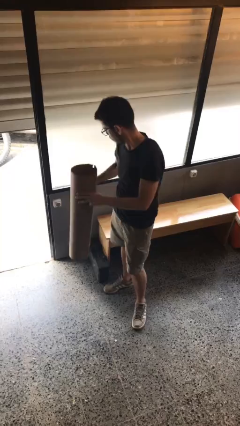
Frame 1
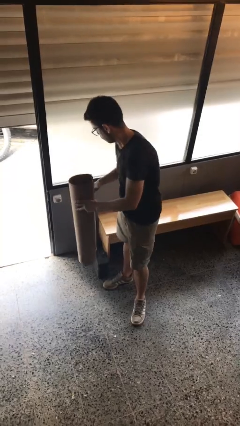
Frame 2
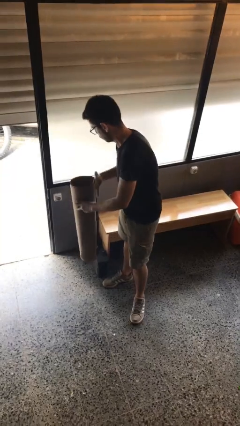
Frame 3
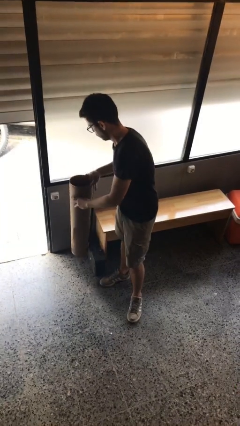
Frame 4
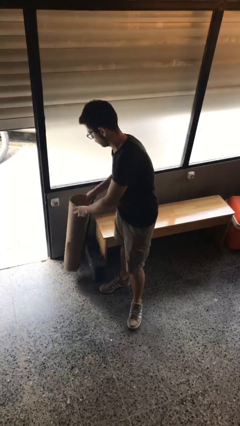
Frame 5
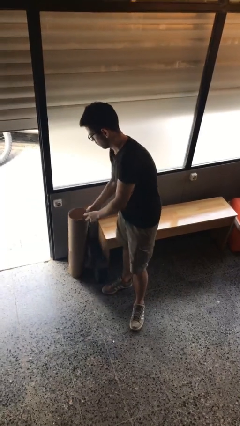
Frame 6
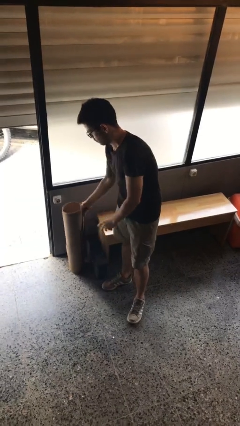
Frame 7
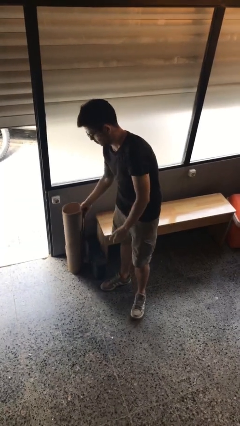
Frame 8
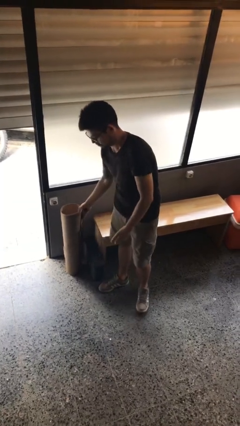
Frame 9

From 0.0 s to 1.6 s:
person puts down object on floor

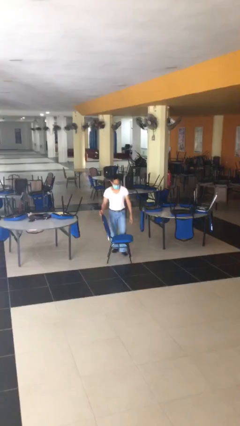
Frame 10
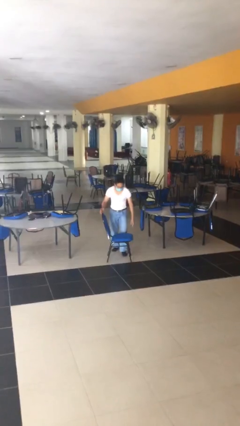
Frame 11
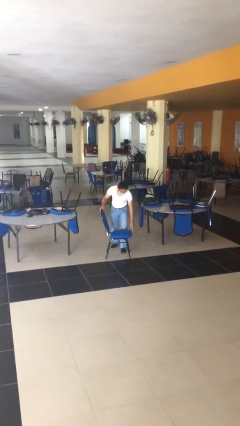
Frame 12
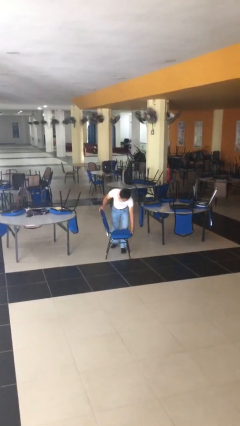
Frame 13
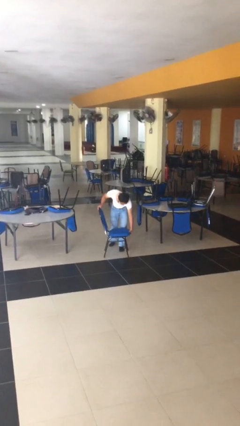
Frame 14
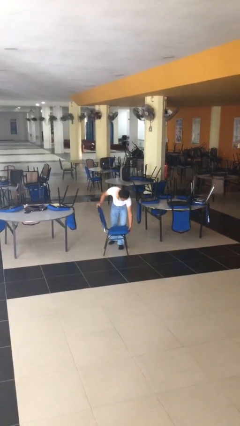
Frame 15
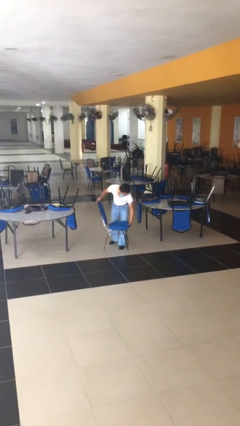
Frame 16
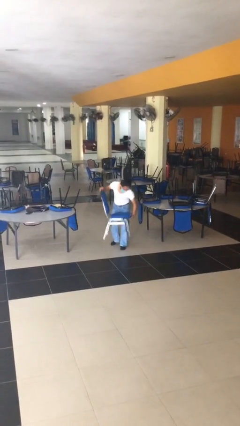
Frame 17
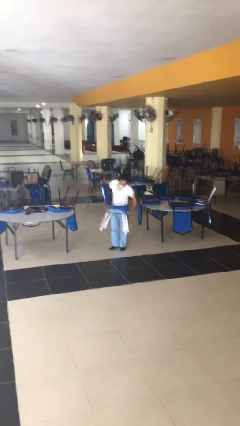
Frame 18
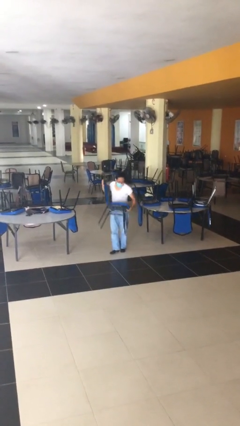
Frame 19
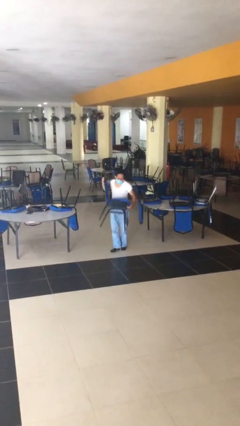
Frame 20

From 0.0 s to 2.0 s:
person picks up object from floor

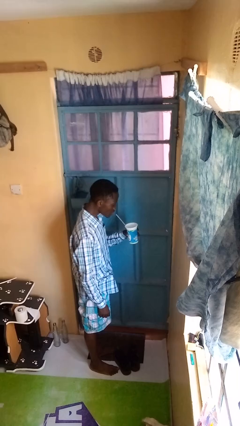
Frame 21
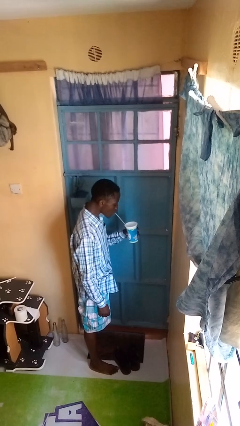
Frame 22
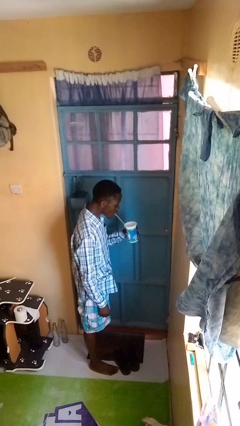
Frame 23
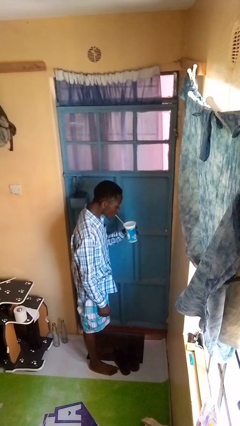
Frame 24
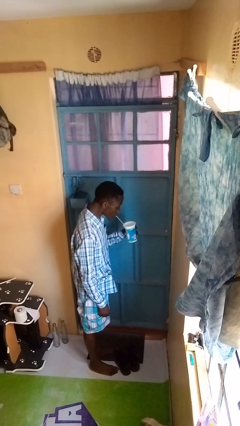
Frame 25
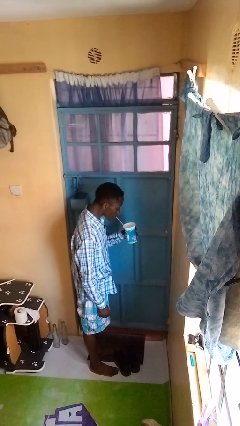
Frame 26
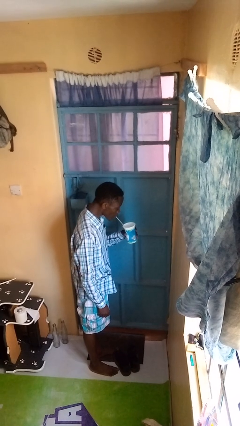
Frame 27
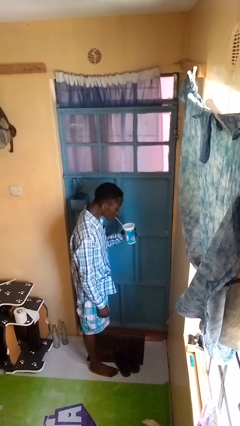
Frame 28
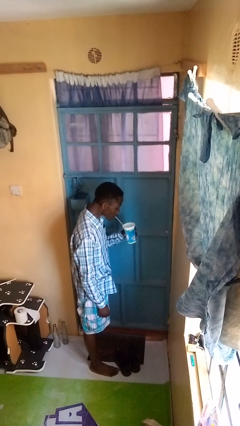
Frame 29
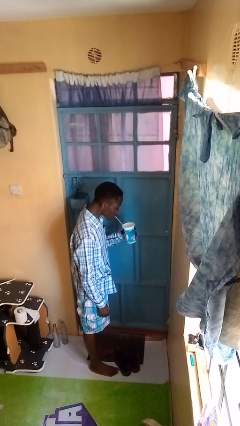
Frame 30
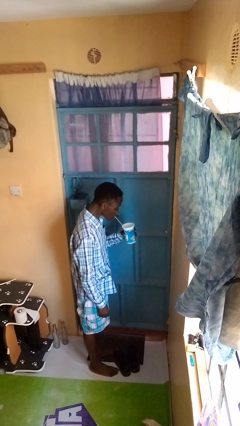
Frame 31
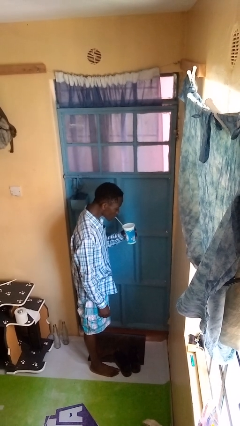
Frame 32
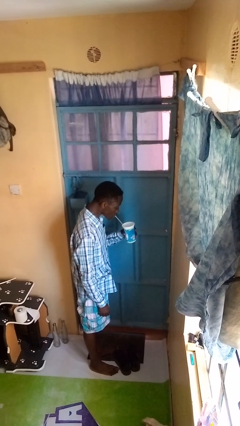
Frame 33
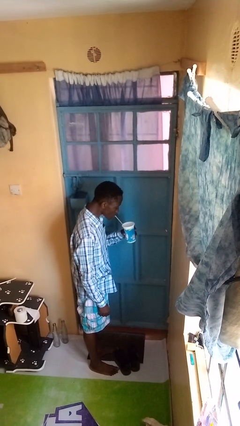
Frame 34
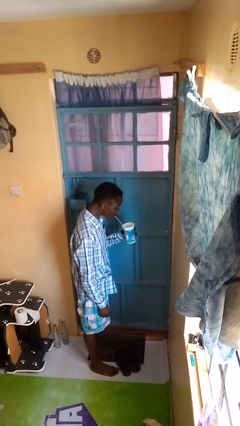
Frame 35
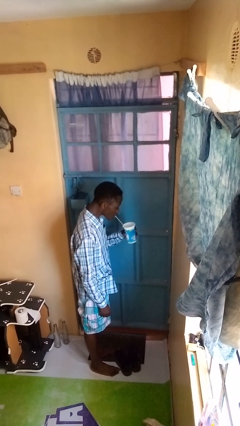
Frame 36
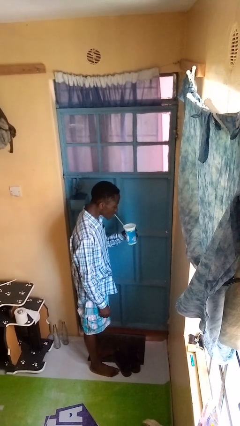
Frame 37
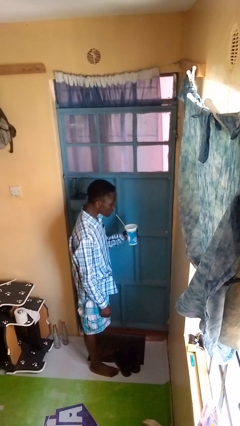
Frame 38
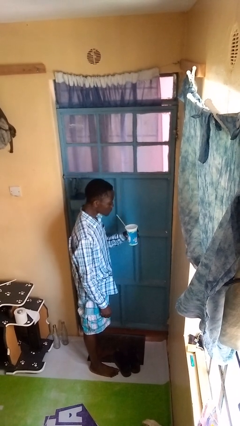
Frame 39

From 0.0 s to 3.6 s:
person drinks from straw

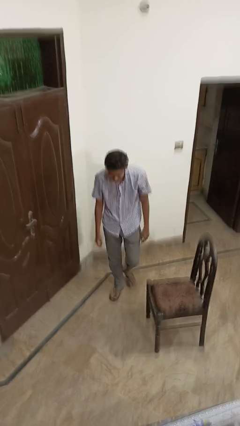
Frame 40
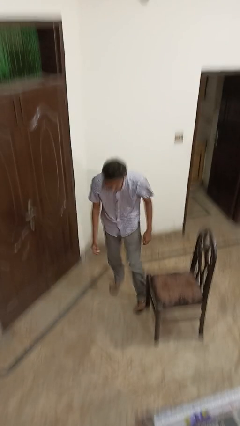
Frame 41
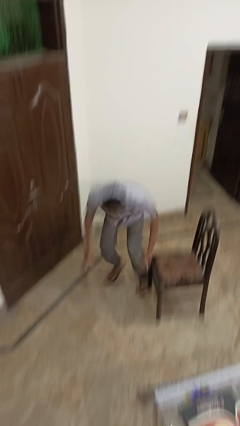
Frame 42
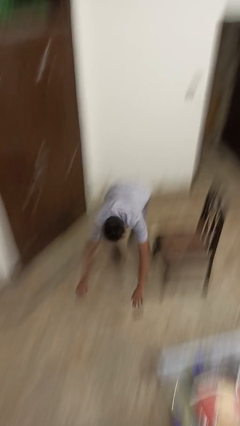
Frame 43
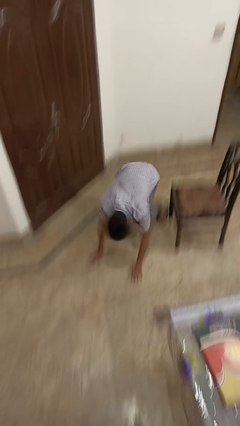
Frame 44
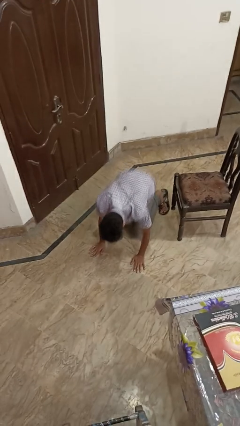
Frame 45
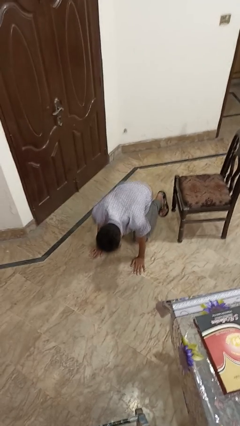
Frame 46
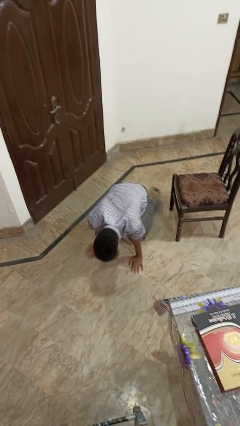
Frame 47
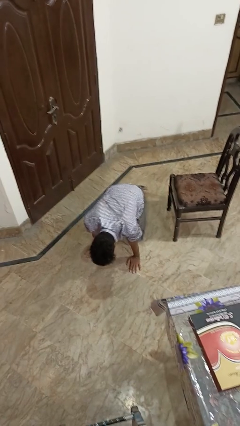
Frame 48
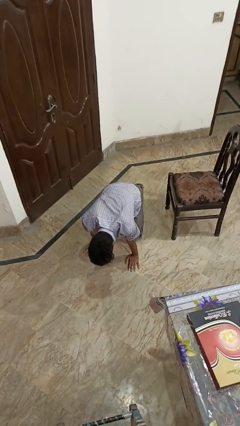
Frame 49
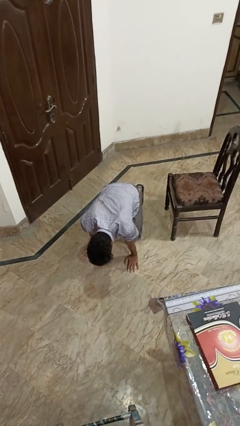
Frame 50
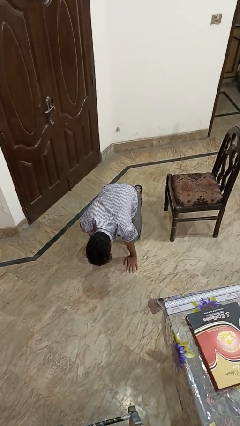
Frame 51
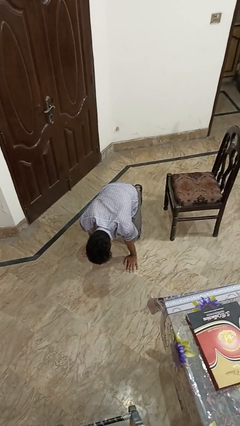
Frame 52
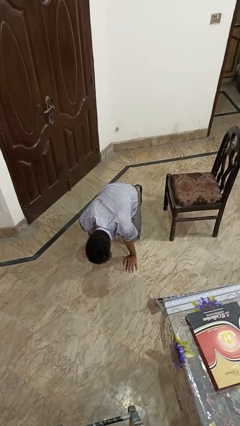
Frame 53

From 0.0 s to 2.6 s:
person trips on object on floor

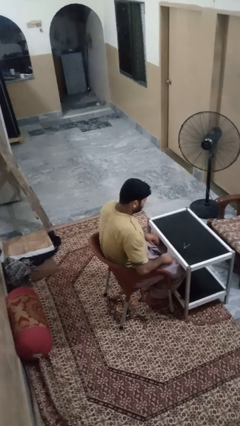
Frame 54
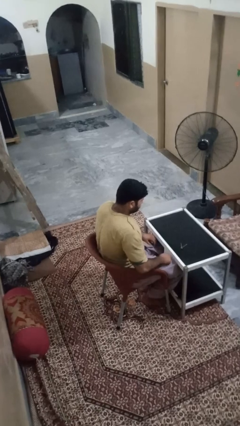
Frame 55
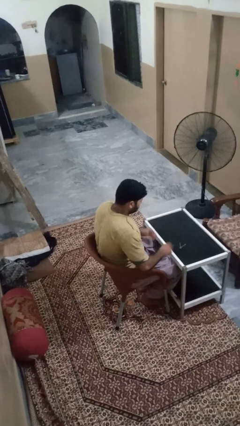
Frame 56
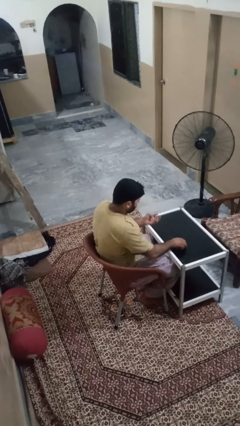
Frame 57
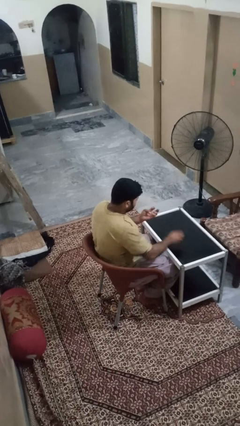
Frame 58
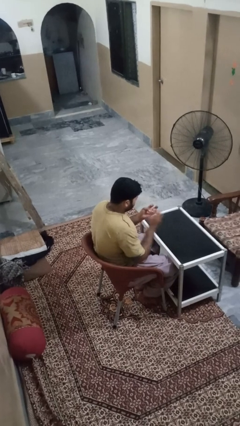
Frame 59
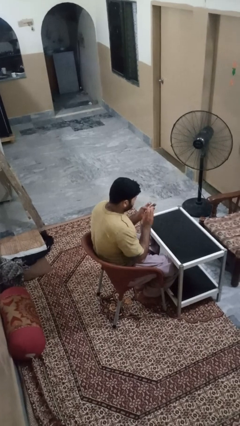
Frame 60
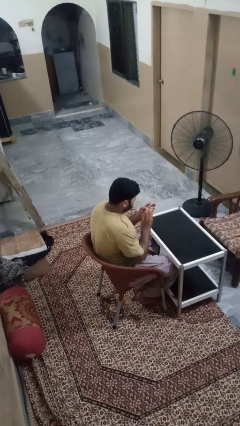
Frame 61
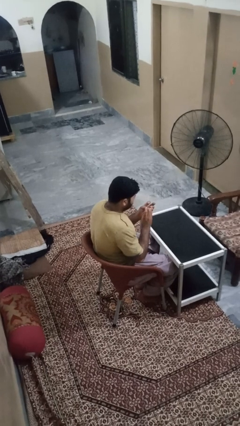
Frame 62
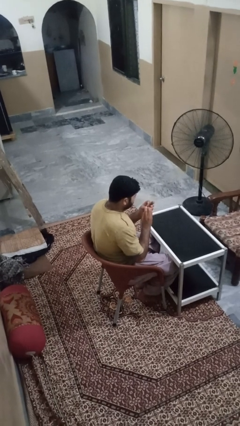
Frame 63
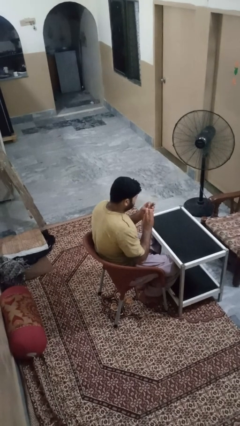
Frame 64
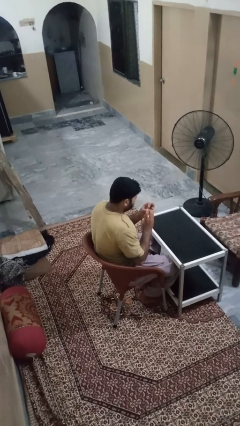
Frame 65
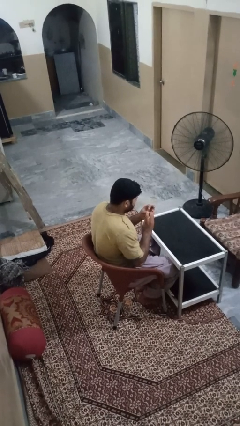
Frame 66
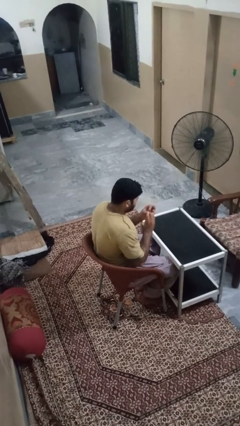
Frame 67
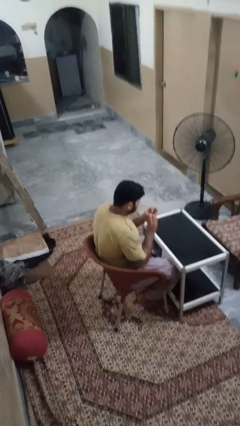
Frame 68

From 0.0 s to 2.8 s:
person clips fingernails

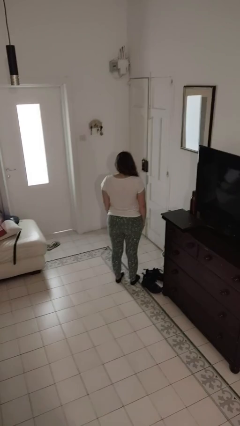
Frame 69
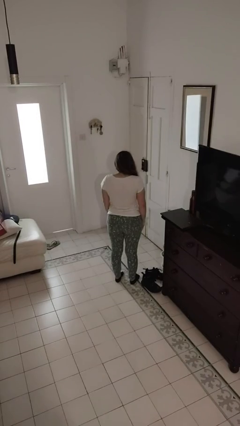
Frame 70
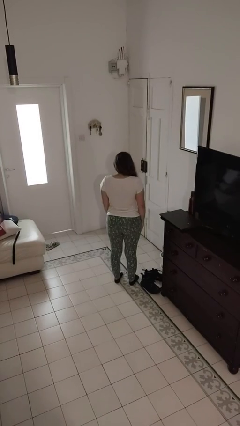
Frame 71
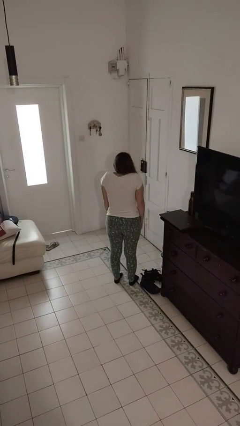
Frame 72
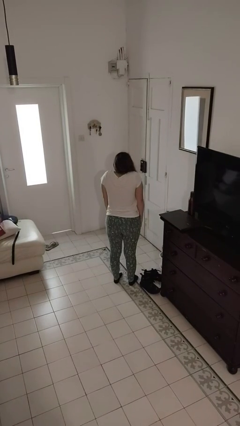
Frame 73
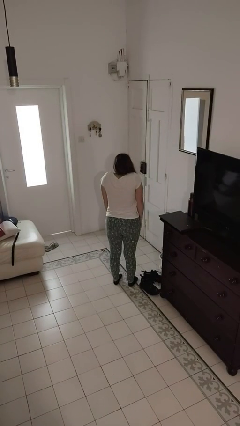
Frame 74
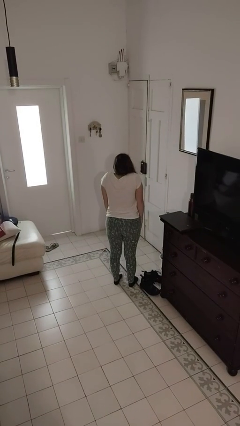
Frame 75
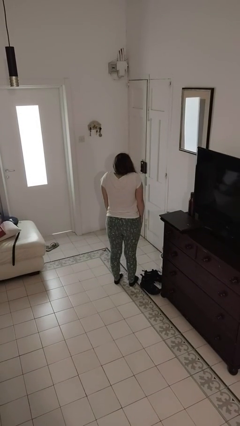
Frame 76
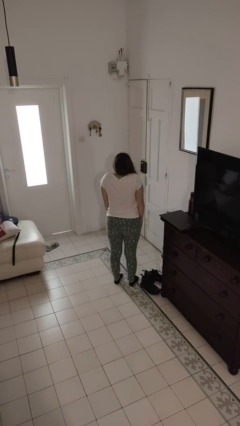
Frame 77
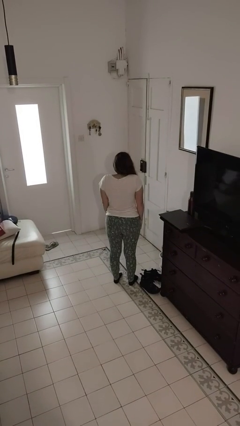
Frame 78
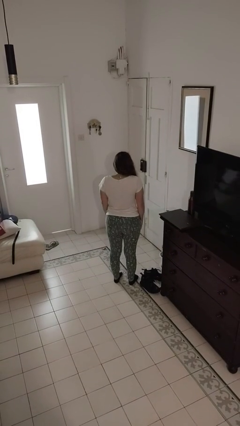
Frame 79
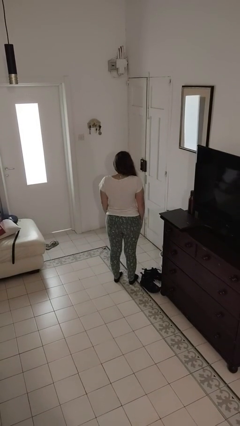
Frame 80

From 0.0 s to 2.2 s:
person shrugs

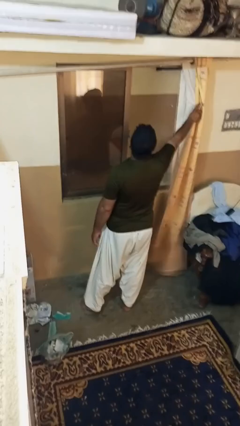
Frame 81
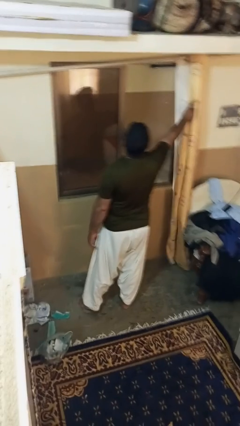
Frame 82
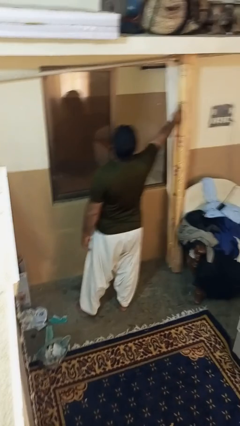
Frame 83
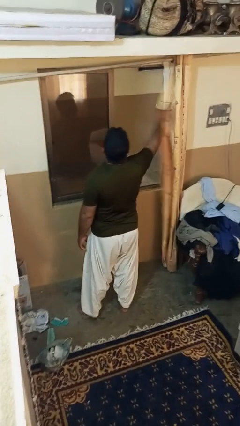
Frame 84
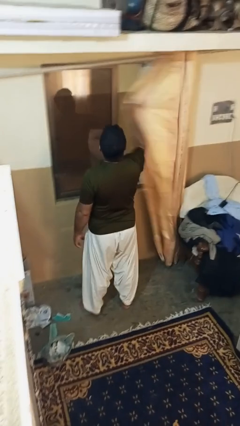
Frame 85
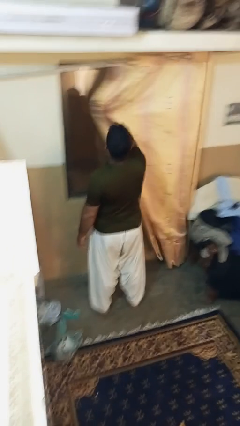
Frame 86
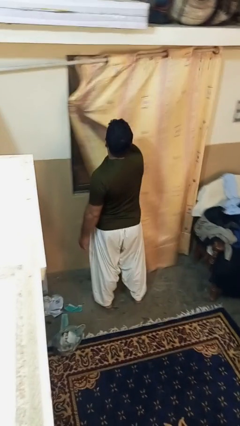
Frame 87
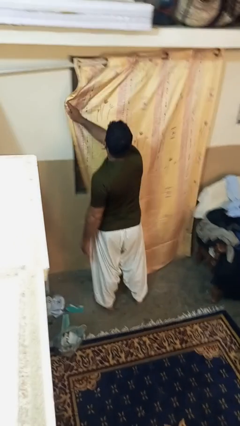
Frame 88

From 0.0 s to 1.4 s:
person closes curtains

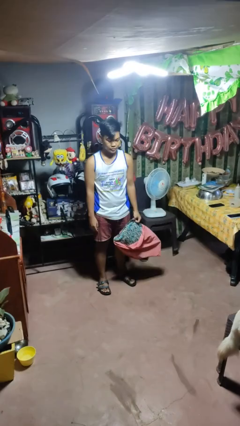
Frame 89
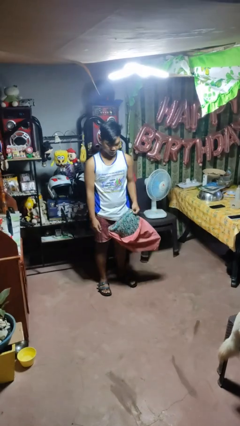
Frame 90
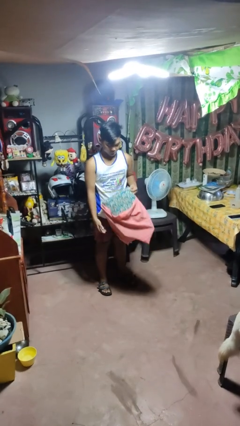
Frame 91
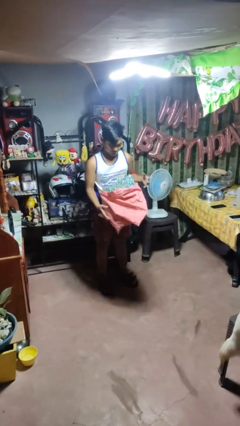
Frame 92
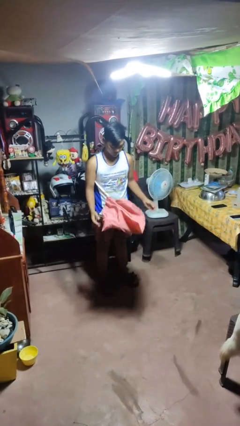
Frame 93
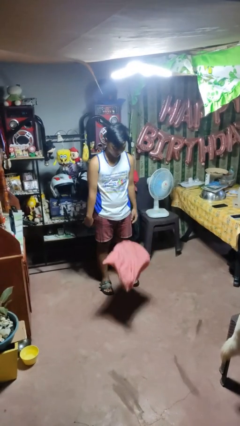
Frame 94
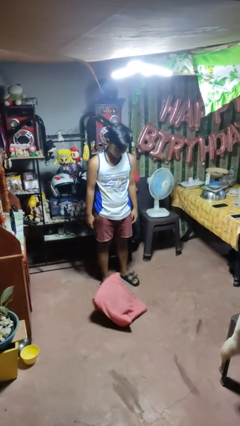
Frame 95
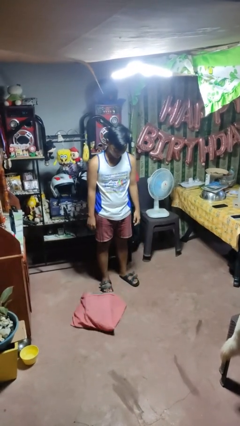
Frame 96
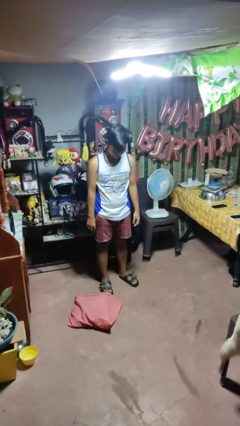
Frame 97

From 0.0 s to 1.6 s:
person drops object
